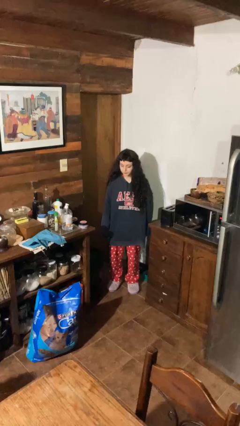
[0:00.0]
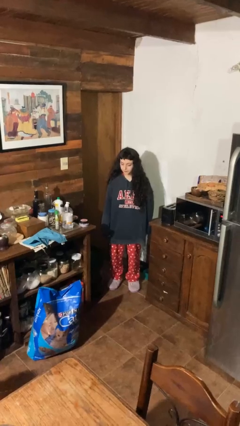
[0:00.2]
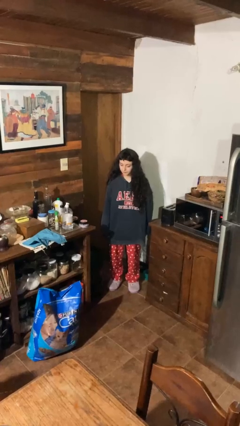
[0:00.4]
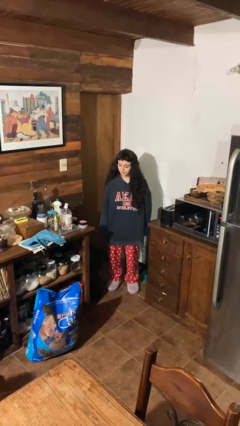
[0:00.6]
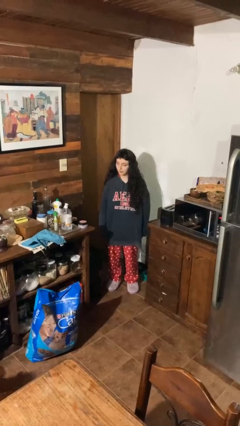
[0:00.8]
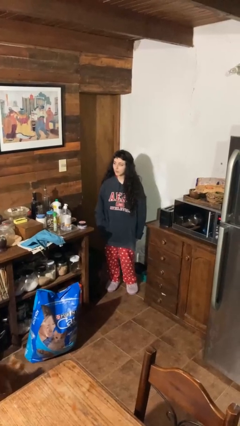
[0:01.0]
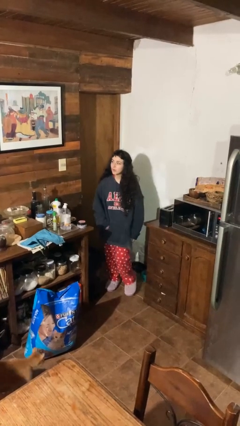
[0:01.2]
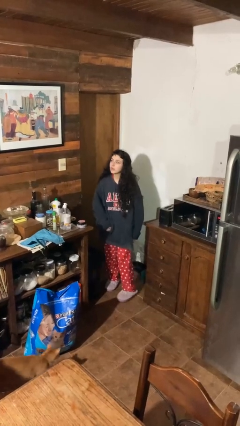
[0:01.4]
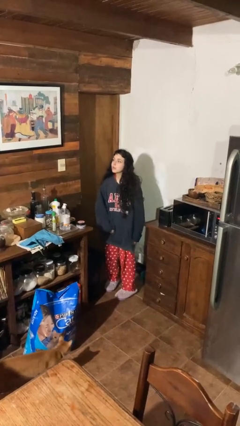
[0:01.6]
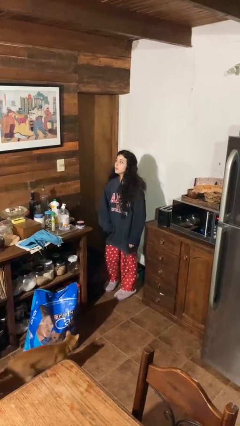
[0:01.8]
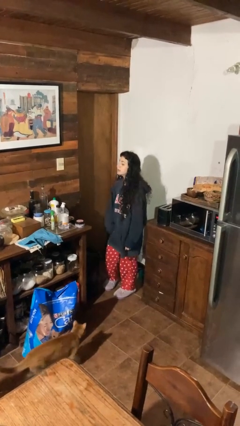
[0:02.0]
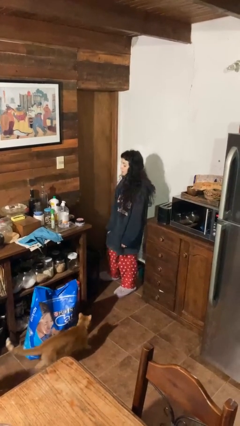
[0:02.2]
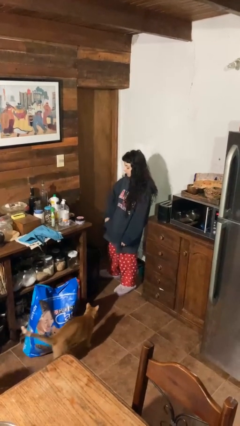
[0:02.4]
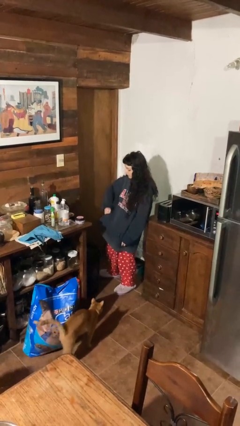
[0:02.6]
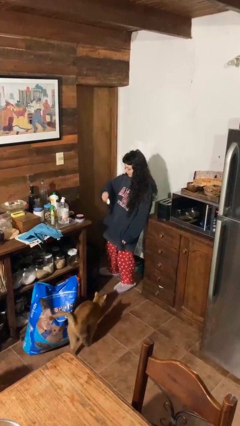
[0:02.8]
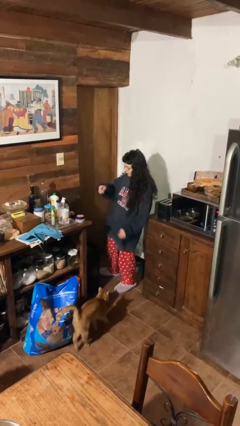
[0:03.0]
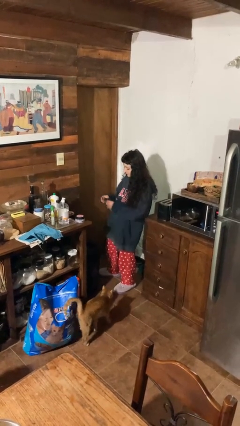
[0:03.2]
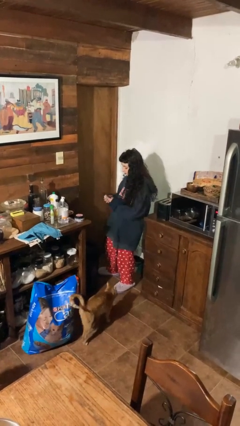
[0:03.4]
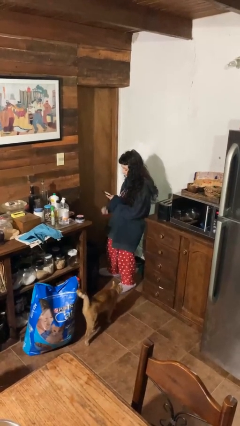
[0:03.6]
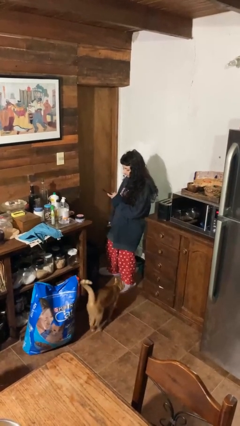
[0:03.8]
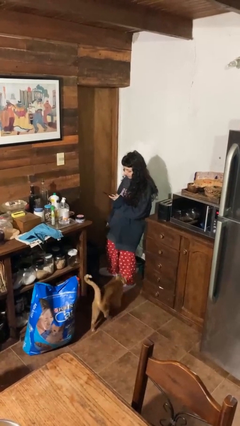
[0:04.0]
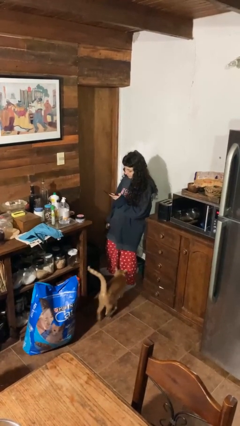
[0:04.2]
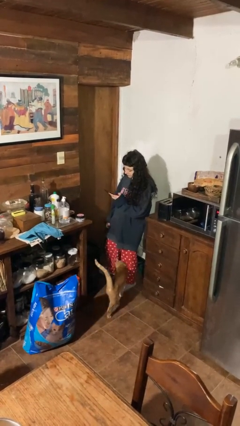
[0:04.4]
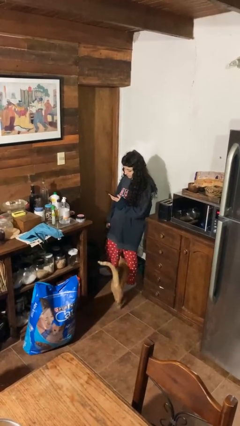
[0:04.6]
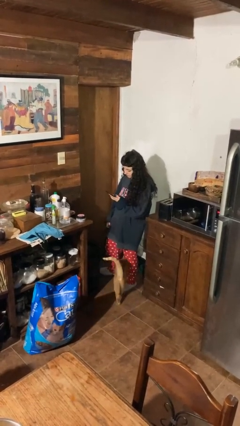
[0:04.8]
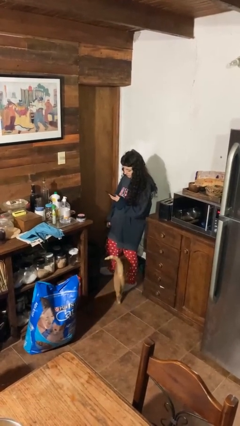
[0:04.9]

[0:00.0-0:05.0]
person takes phone from pocket

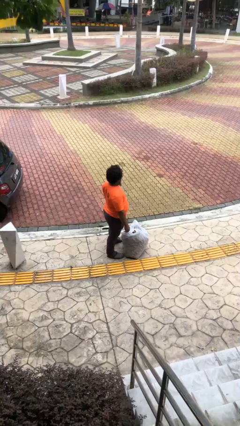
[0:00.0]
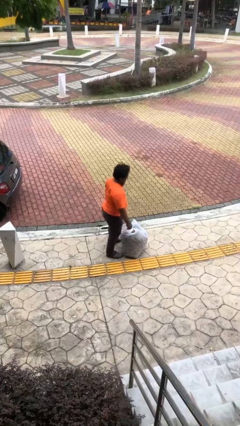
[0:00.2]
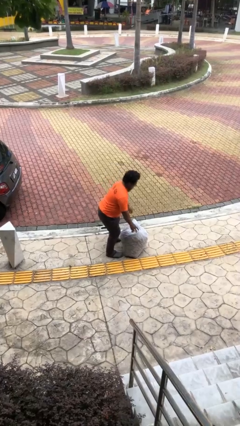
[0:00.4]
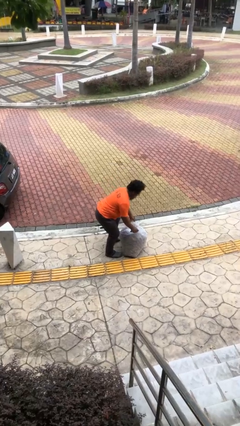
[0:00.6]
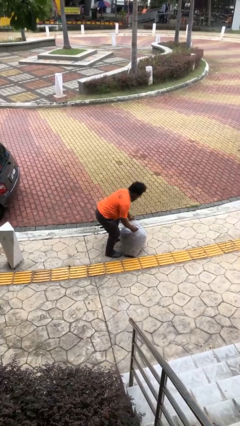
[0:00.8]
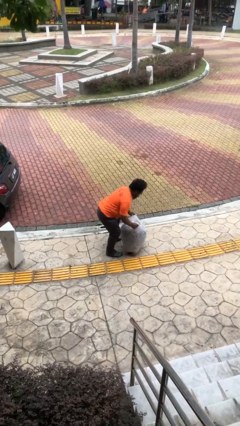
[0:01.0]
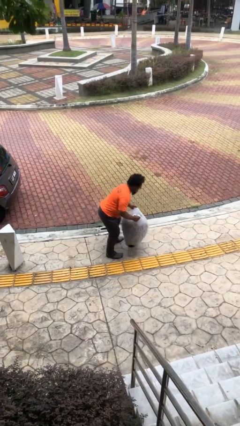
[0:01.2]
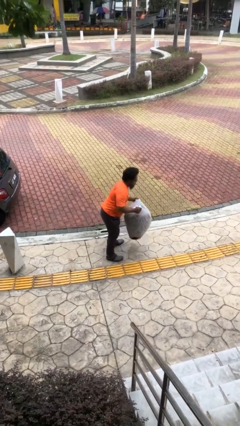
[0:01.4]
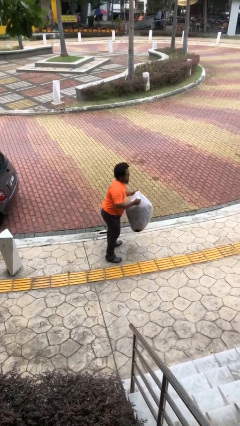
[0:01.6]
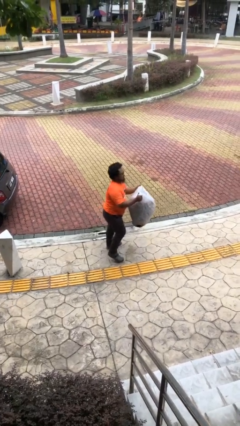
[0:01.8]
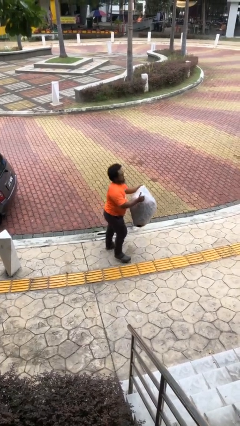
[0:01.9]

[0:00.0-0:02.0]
person picks up object from floor

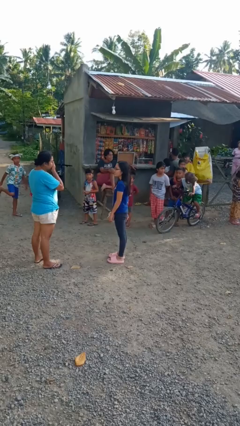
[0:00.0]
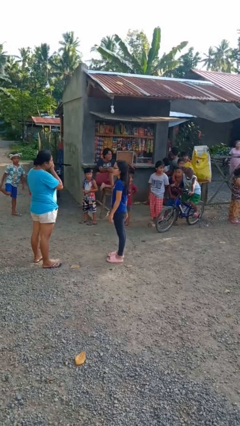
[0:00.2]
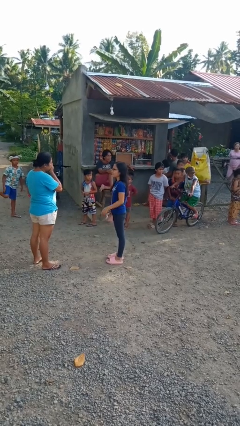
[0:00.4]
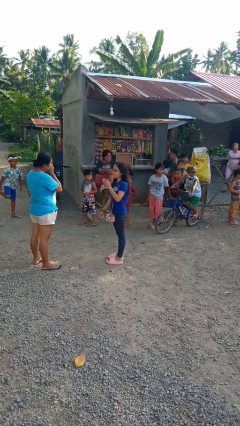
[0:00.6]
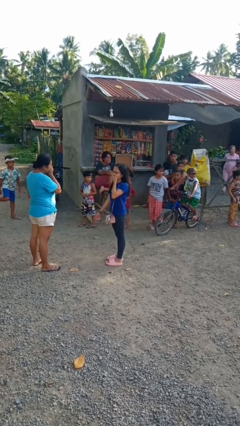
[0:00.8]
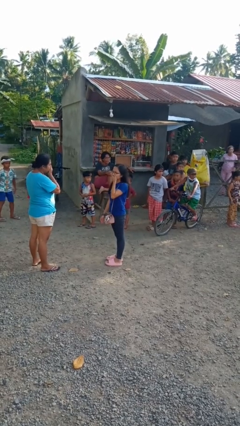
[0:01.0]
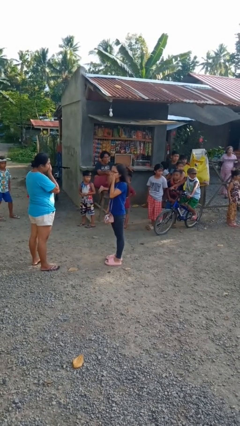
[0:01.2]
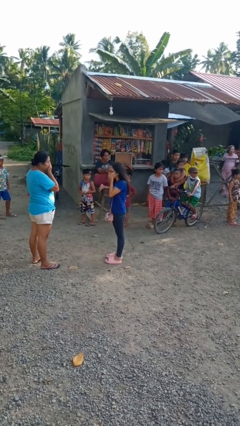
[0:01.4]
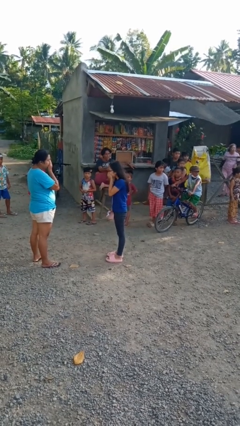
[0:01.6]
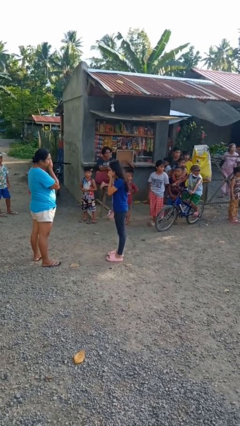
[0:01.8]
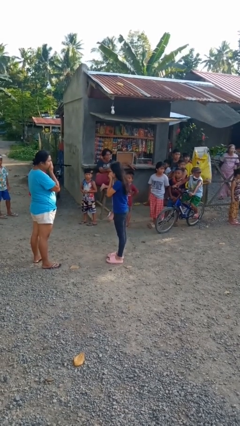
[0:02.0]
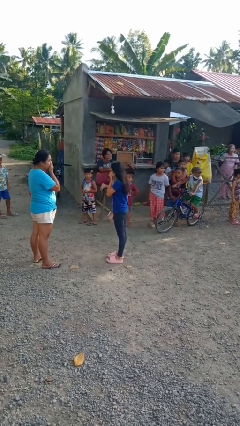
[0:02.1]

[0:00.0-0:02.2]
person laughs with person

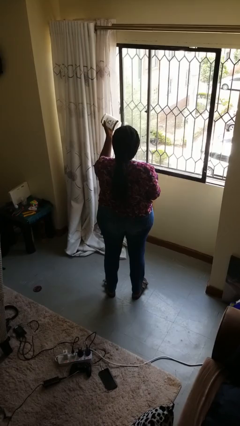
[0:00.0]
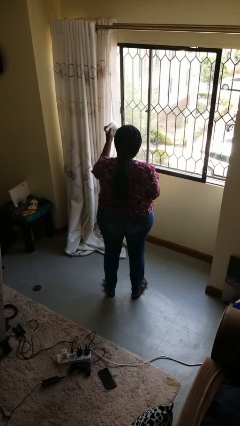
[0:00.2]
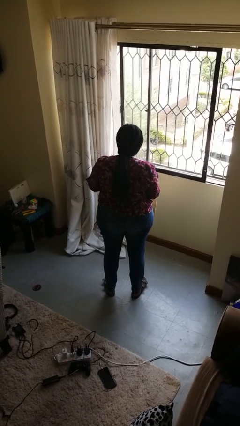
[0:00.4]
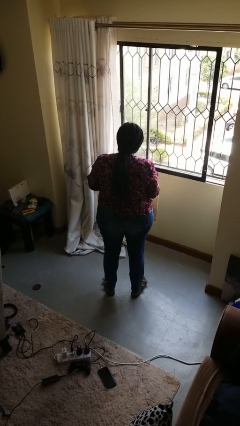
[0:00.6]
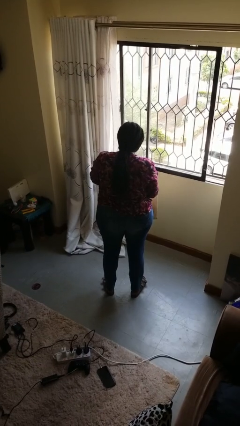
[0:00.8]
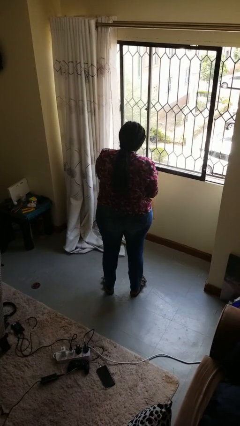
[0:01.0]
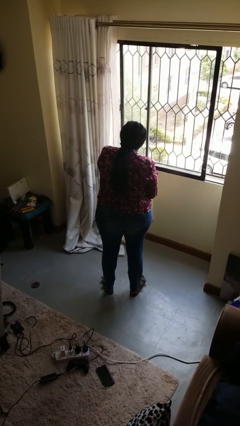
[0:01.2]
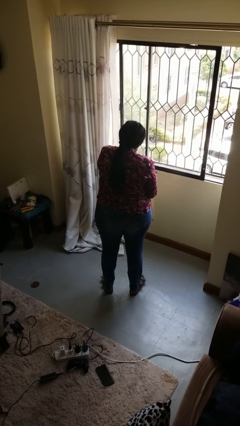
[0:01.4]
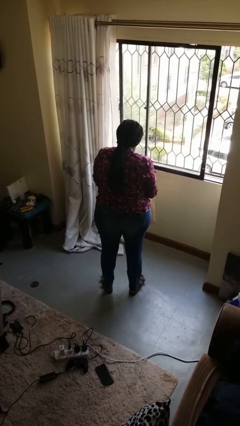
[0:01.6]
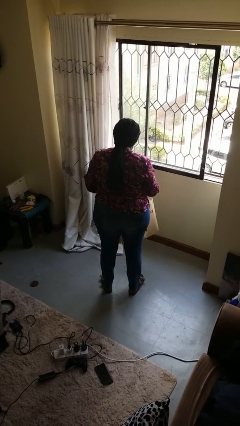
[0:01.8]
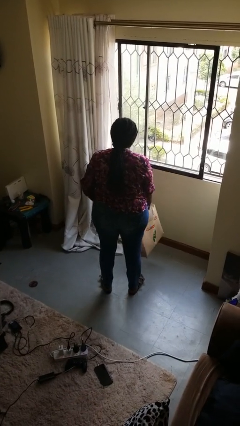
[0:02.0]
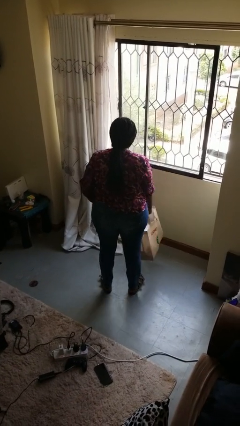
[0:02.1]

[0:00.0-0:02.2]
person puts object into bag

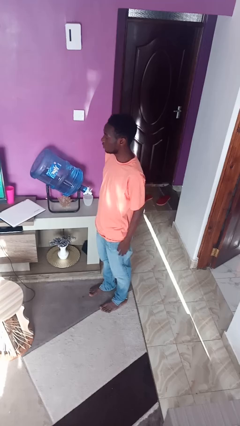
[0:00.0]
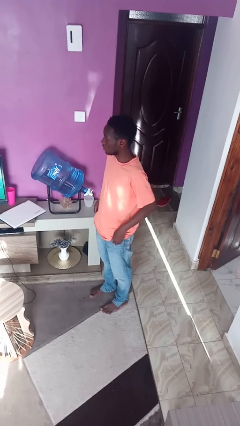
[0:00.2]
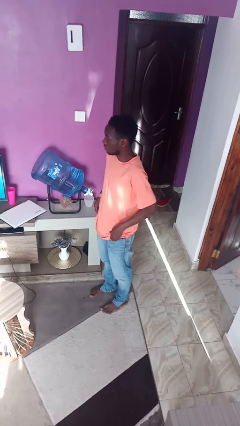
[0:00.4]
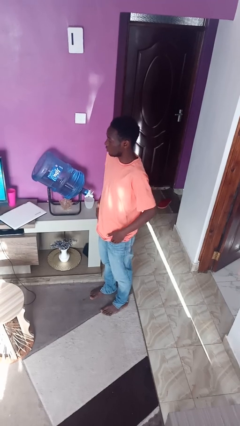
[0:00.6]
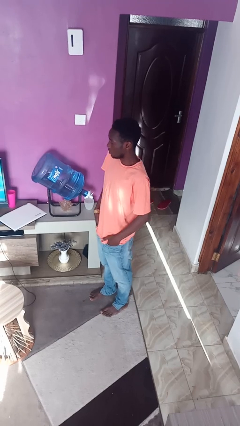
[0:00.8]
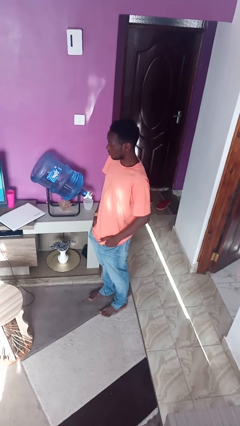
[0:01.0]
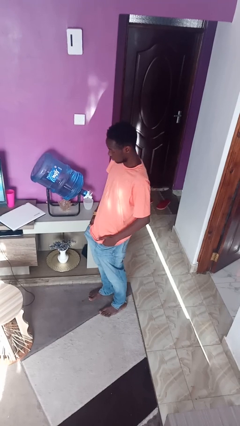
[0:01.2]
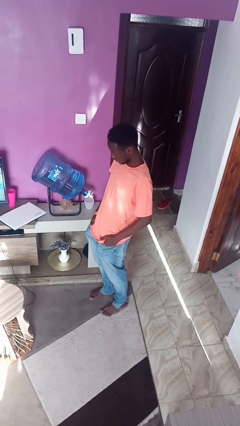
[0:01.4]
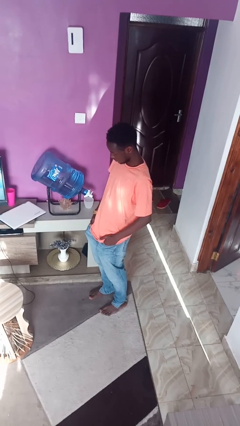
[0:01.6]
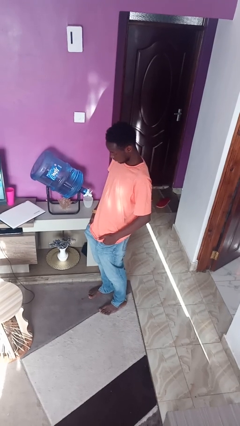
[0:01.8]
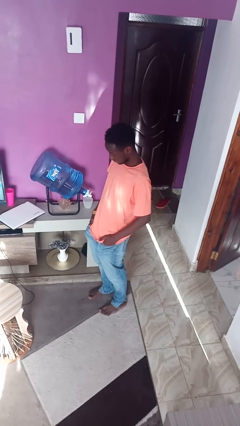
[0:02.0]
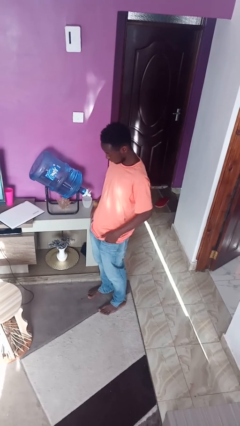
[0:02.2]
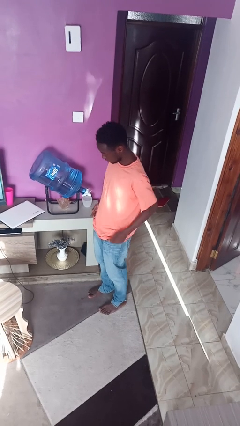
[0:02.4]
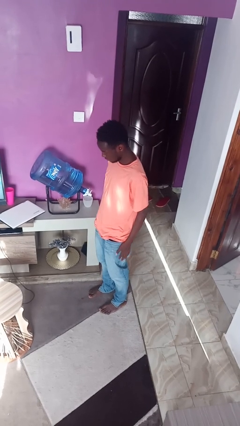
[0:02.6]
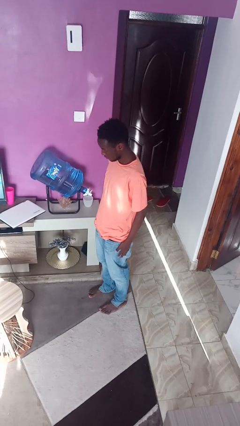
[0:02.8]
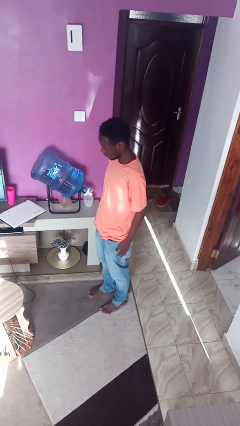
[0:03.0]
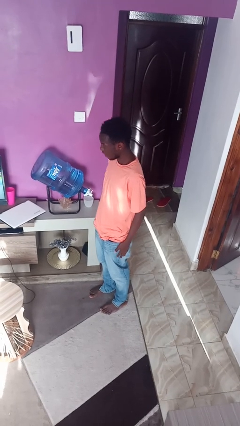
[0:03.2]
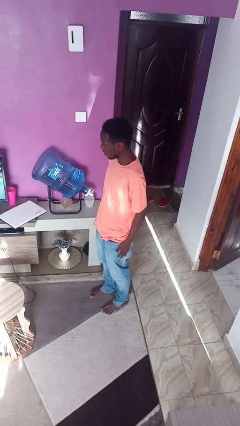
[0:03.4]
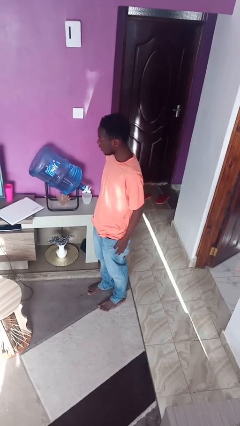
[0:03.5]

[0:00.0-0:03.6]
person puts hands in back pockets

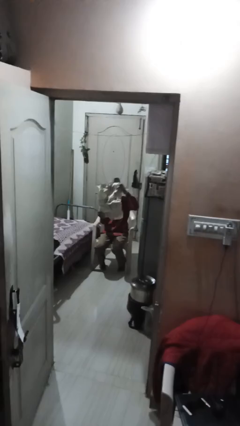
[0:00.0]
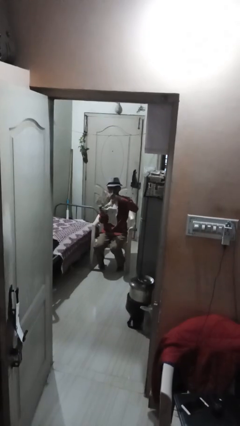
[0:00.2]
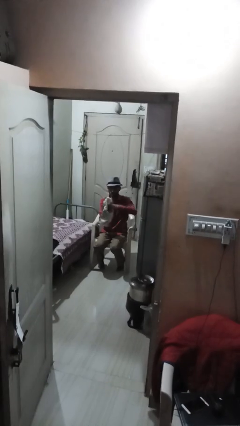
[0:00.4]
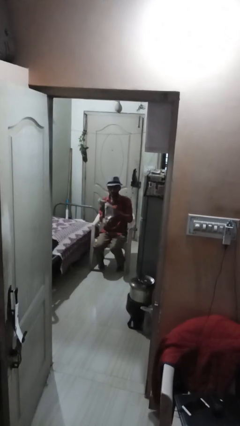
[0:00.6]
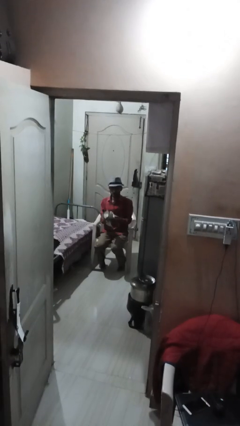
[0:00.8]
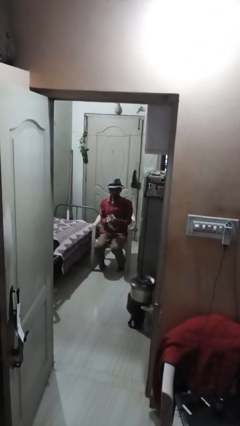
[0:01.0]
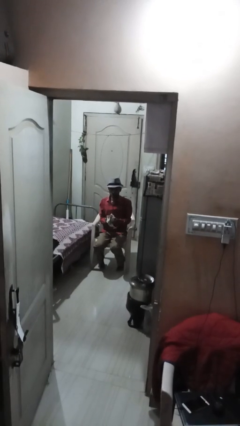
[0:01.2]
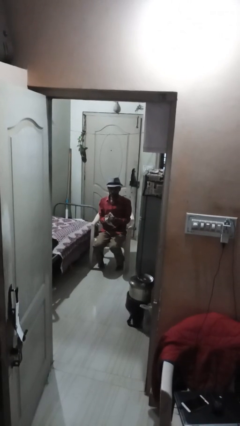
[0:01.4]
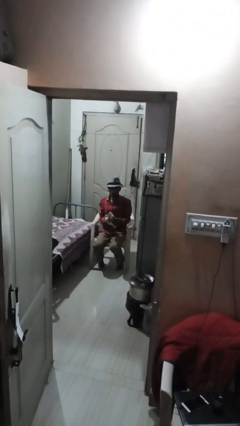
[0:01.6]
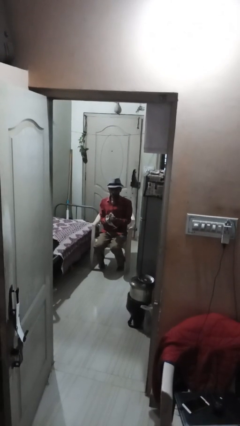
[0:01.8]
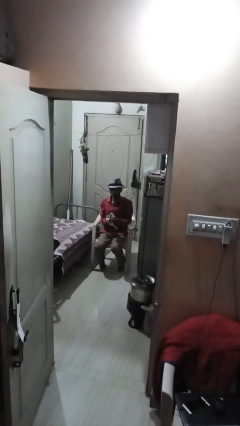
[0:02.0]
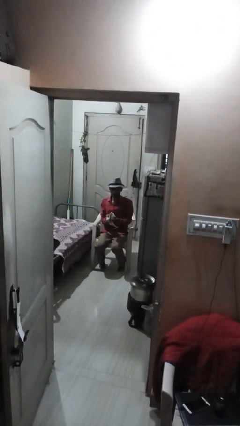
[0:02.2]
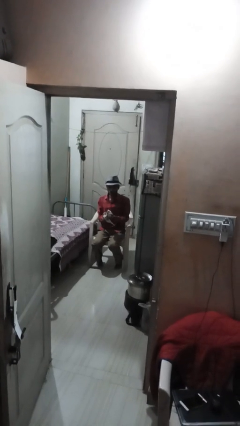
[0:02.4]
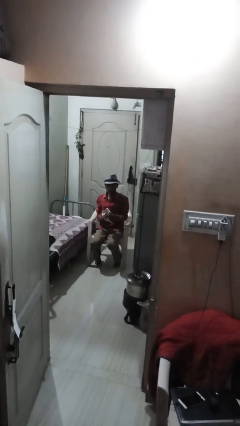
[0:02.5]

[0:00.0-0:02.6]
person crumples paper
